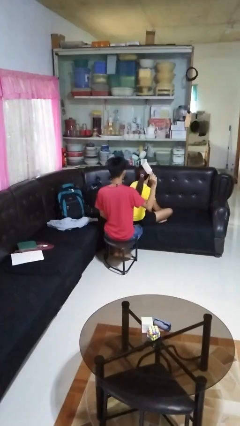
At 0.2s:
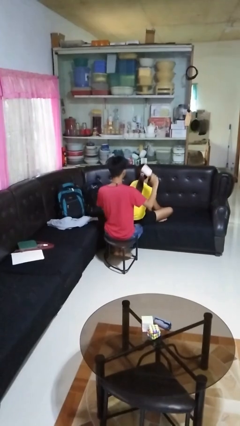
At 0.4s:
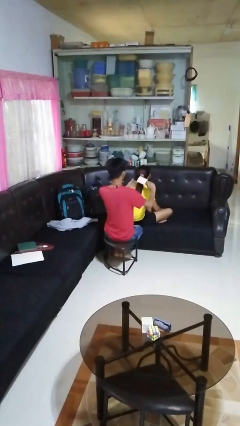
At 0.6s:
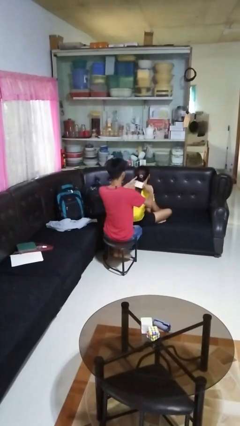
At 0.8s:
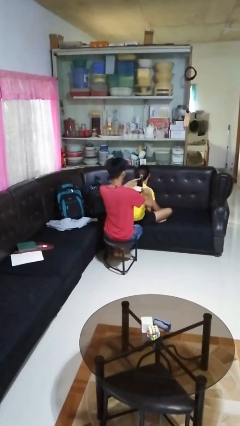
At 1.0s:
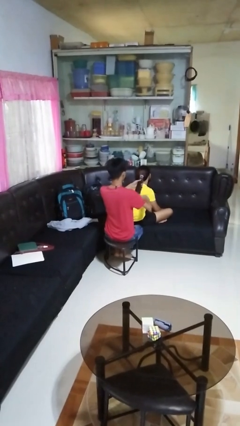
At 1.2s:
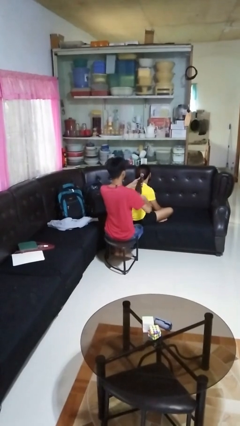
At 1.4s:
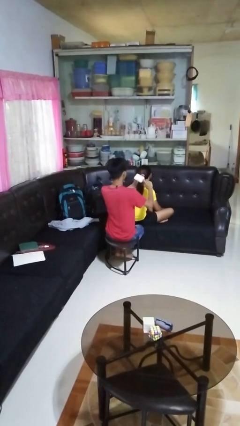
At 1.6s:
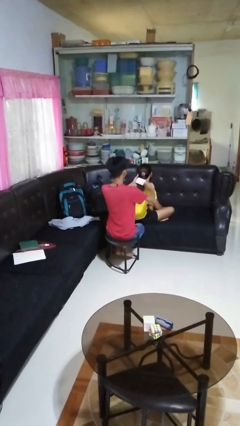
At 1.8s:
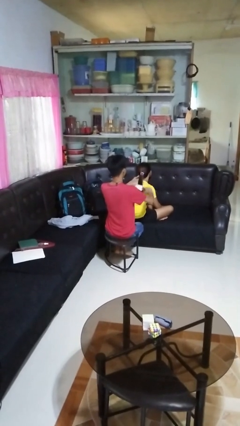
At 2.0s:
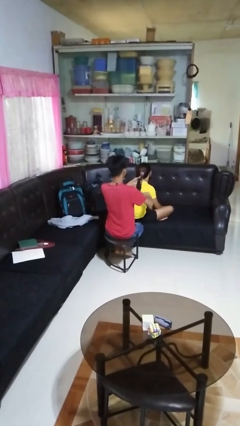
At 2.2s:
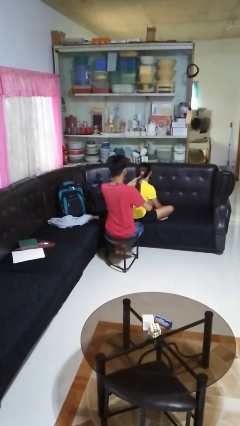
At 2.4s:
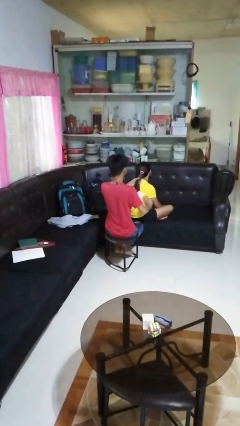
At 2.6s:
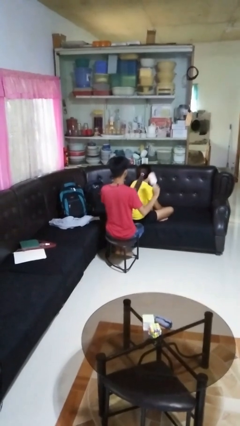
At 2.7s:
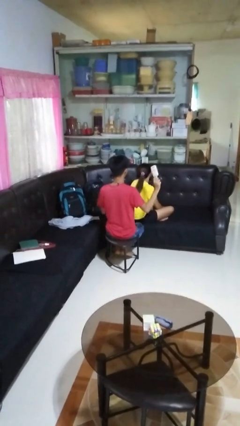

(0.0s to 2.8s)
person brushes hair of person

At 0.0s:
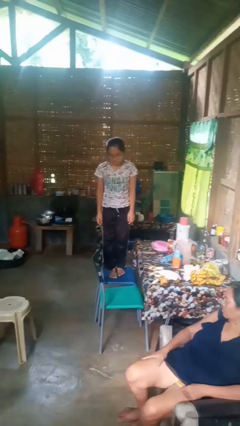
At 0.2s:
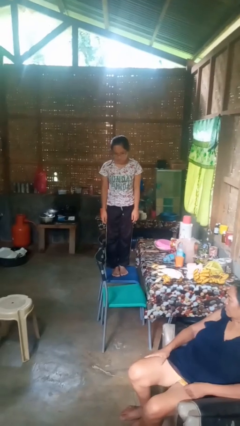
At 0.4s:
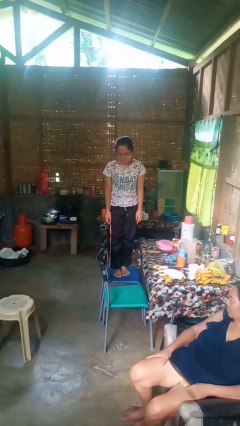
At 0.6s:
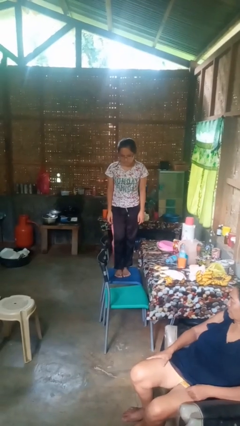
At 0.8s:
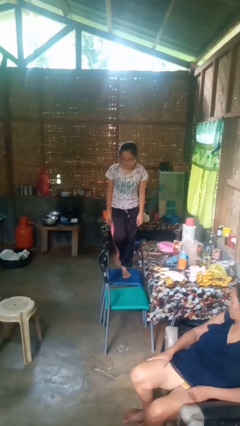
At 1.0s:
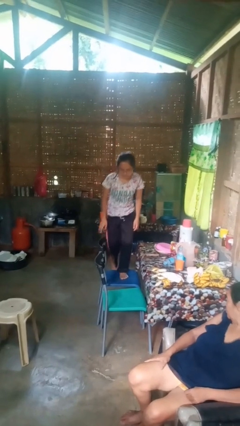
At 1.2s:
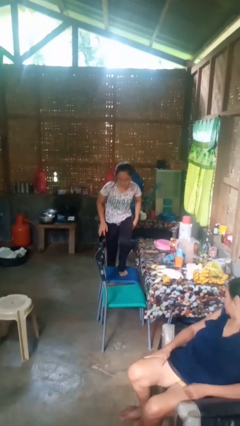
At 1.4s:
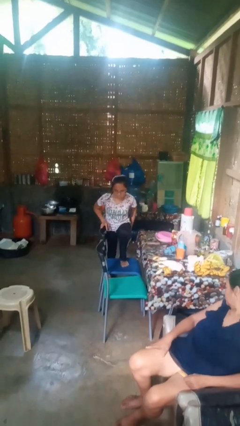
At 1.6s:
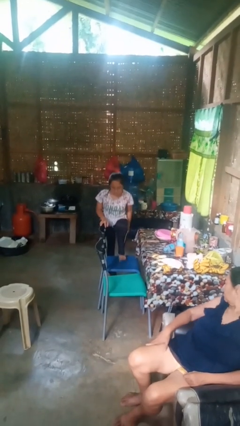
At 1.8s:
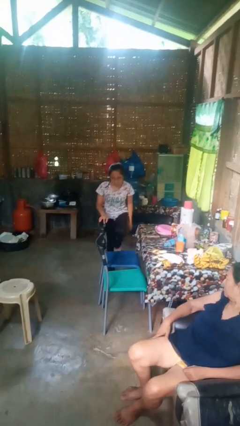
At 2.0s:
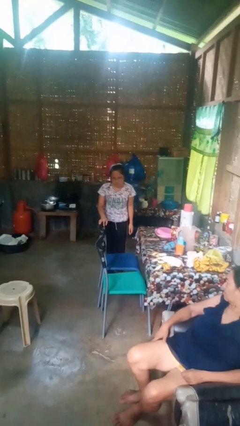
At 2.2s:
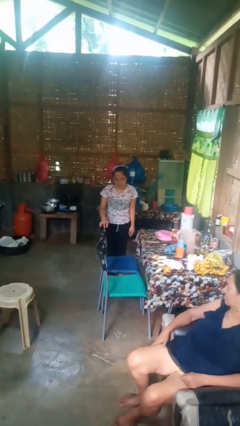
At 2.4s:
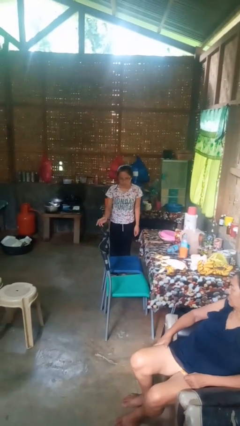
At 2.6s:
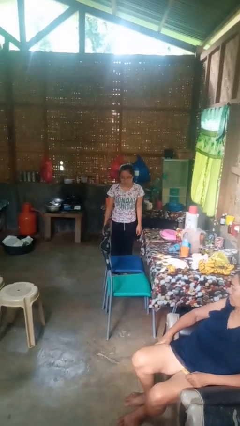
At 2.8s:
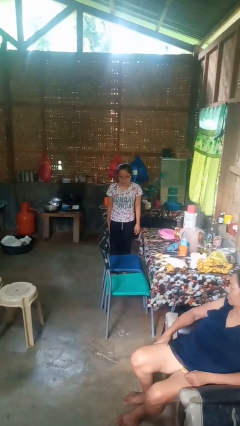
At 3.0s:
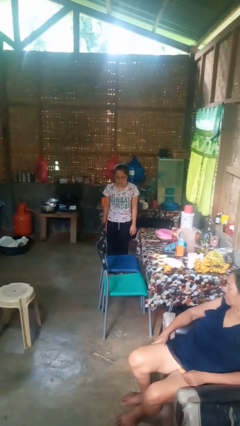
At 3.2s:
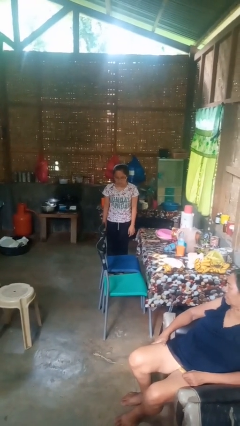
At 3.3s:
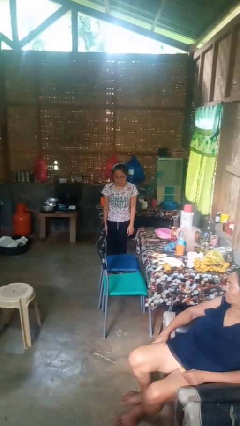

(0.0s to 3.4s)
person climbs off chair

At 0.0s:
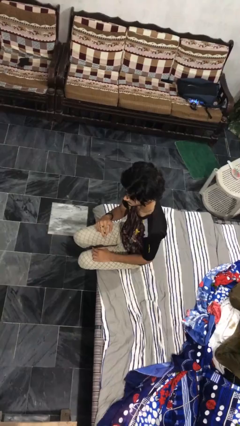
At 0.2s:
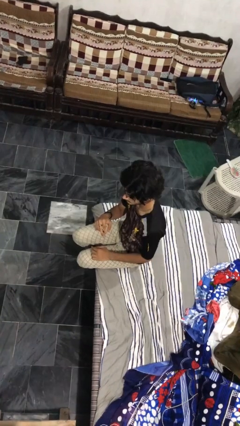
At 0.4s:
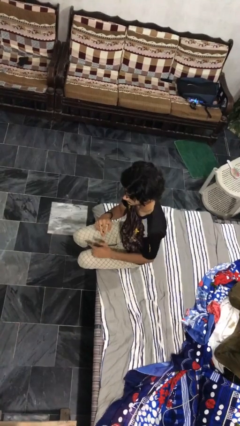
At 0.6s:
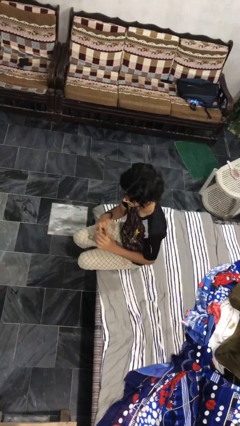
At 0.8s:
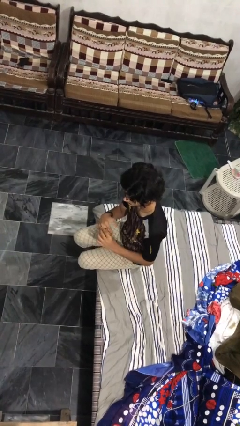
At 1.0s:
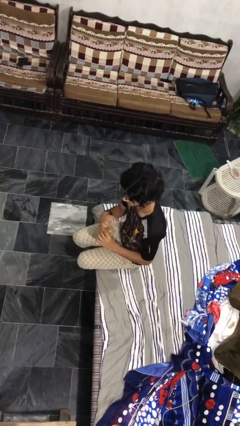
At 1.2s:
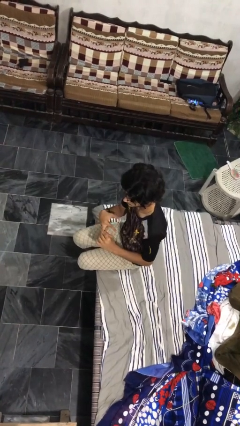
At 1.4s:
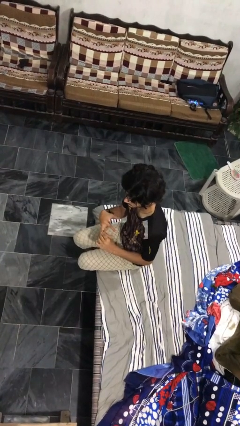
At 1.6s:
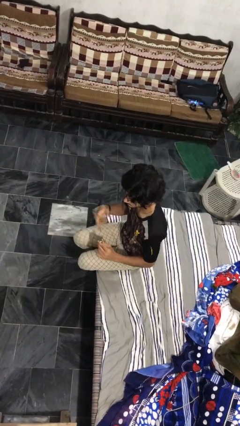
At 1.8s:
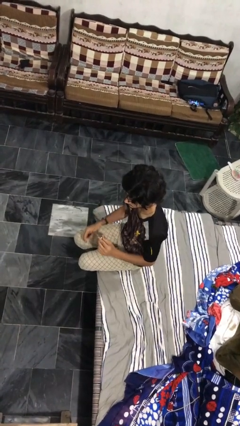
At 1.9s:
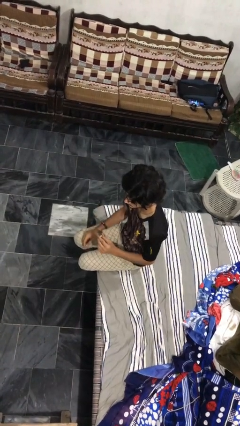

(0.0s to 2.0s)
person takes off ring

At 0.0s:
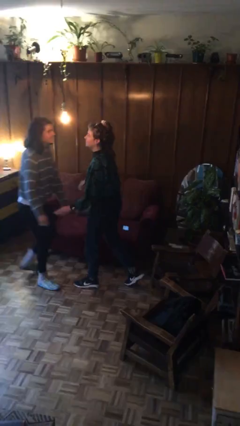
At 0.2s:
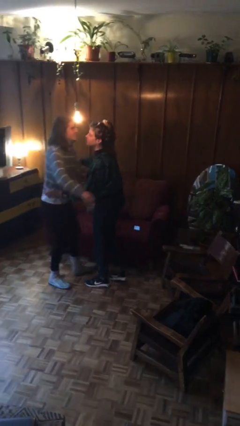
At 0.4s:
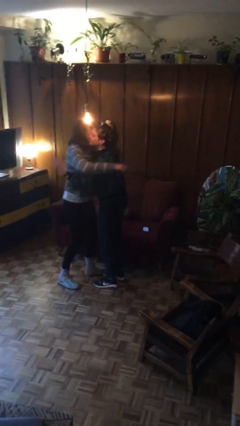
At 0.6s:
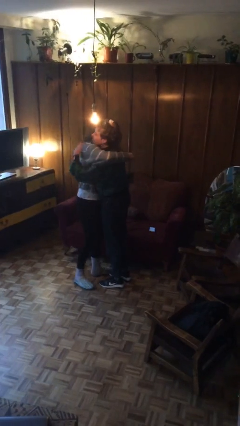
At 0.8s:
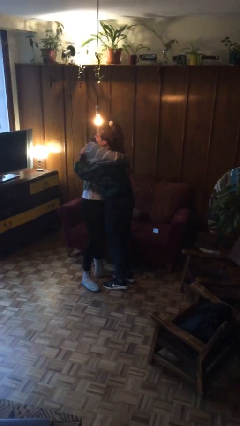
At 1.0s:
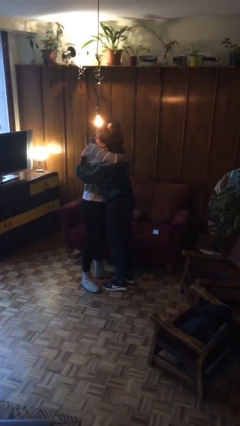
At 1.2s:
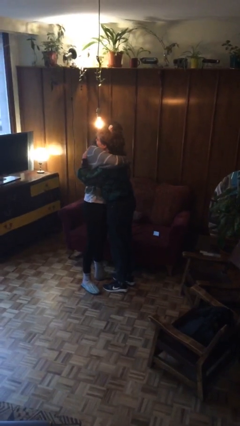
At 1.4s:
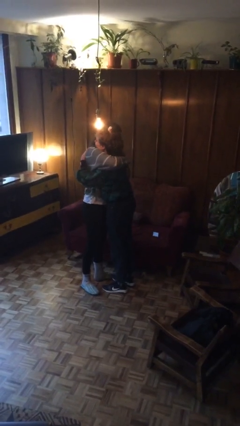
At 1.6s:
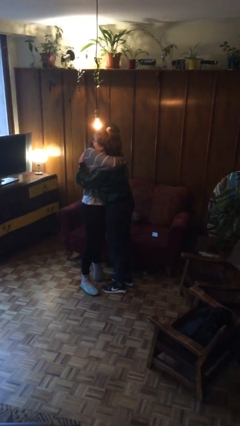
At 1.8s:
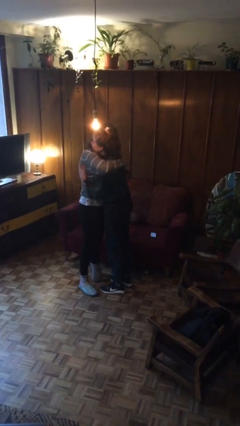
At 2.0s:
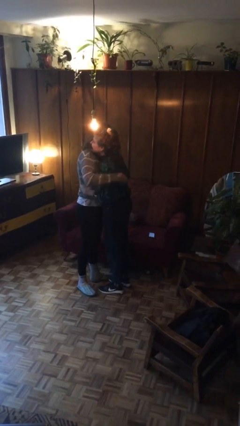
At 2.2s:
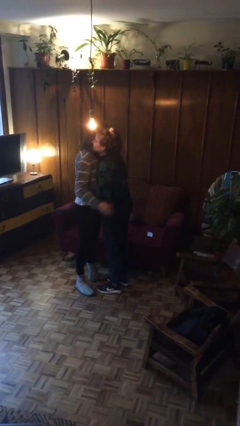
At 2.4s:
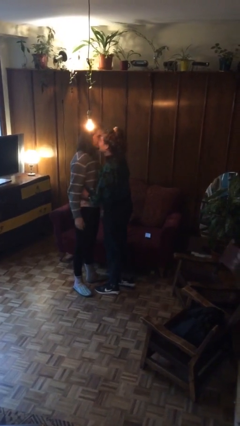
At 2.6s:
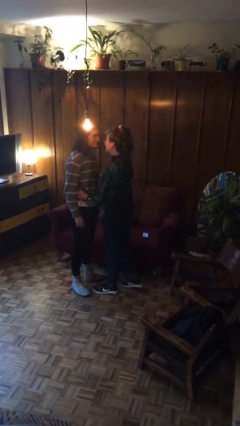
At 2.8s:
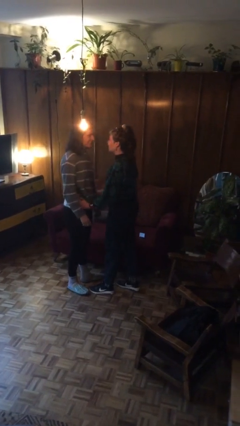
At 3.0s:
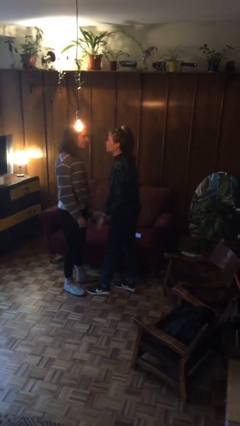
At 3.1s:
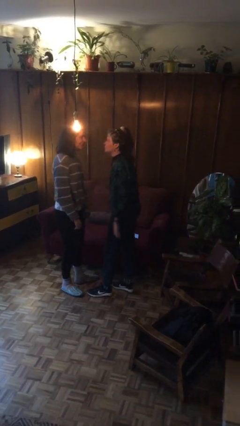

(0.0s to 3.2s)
person embraces person

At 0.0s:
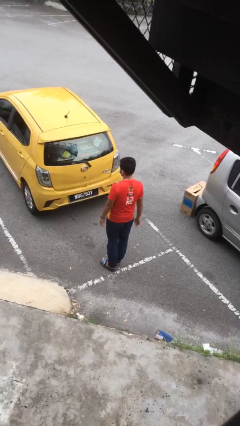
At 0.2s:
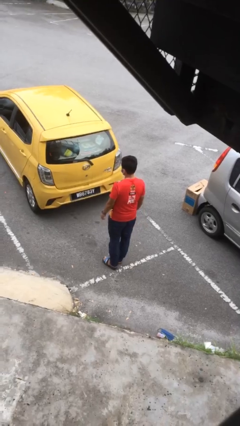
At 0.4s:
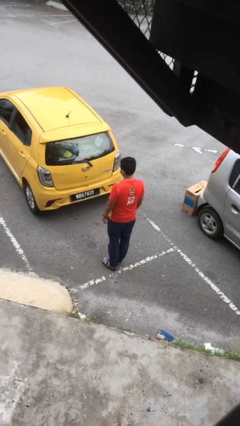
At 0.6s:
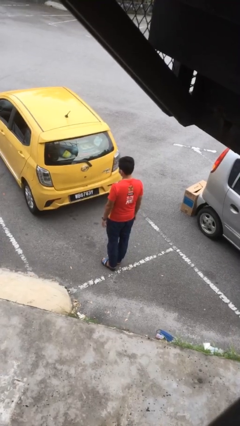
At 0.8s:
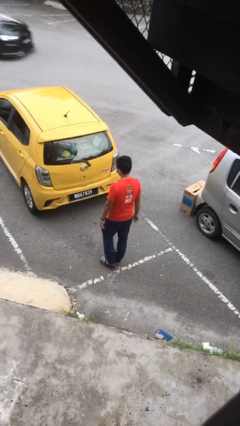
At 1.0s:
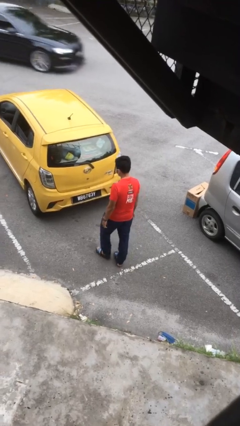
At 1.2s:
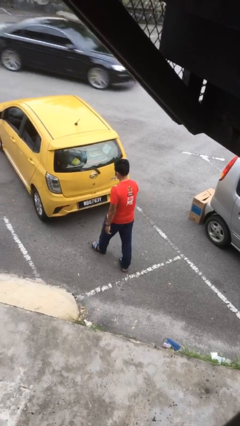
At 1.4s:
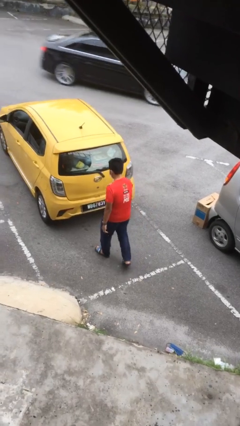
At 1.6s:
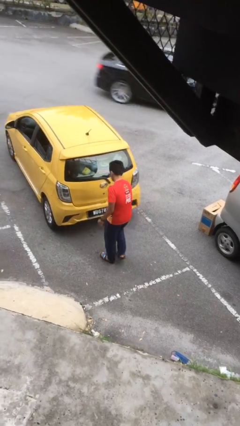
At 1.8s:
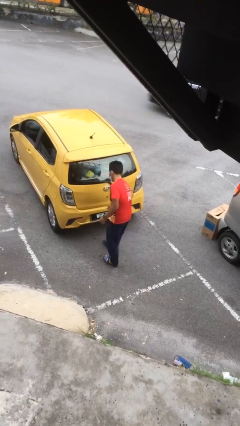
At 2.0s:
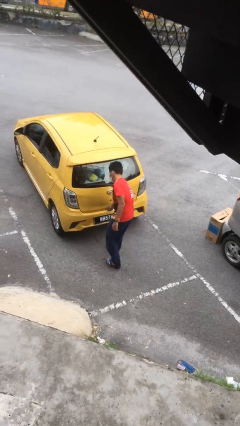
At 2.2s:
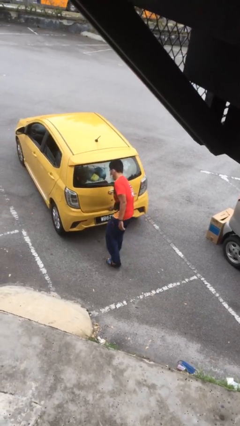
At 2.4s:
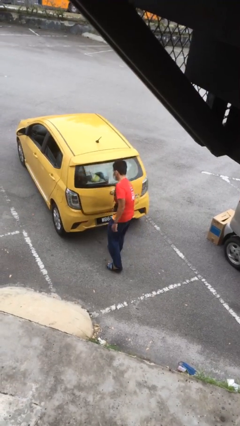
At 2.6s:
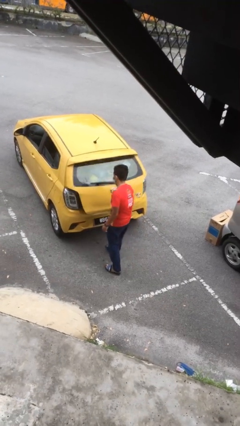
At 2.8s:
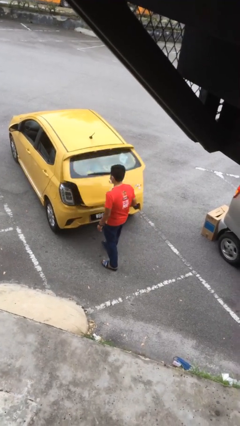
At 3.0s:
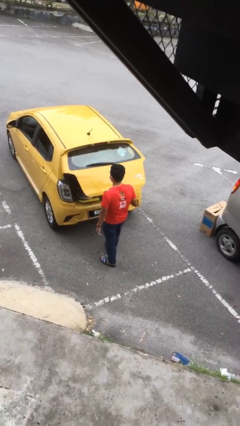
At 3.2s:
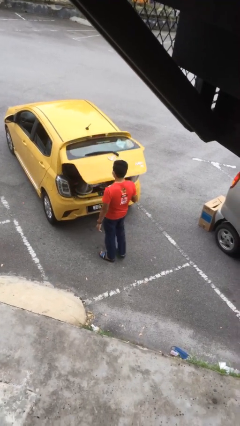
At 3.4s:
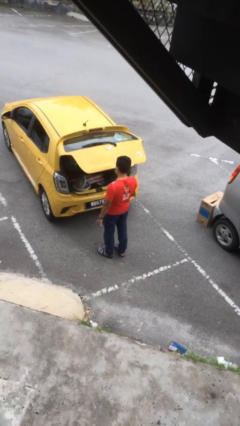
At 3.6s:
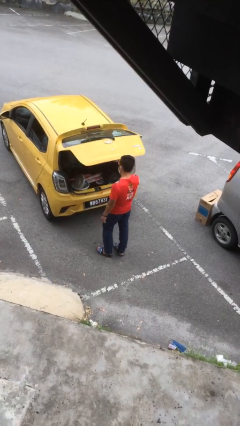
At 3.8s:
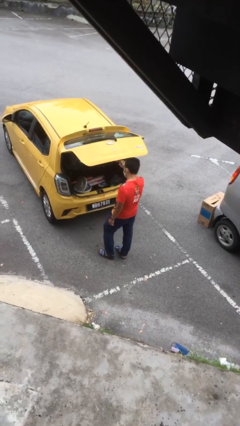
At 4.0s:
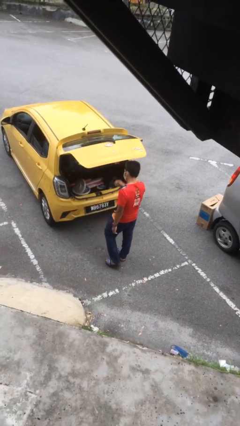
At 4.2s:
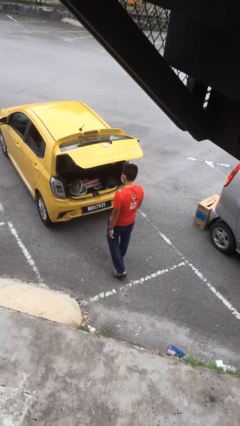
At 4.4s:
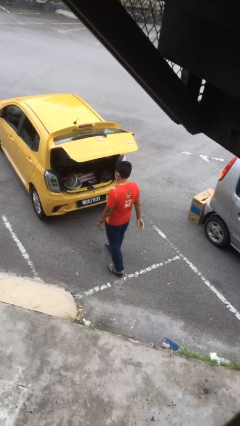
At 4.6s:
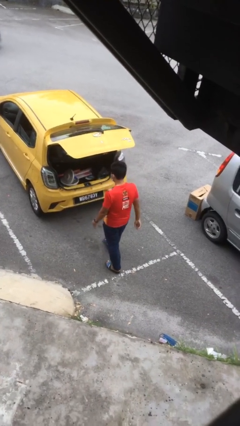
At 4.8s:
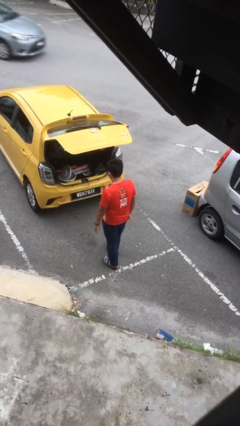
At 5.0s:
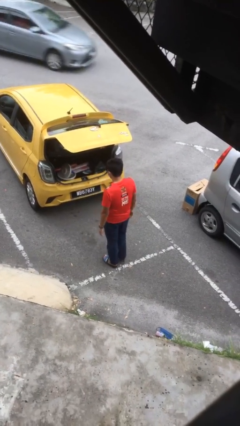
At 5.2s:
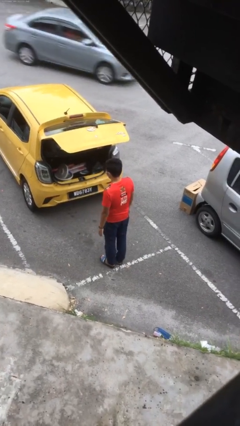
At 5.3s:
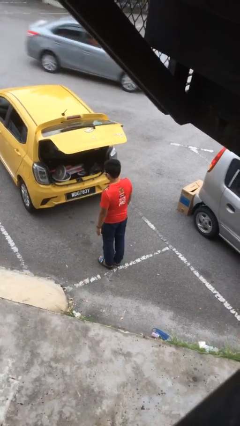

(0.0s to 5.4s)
person opens car trunk

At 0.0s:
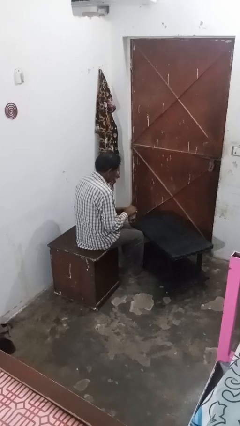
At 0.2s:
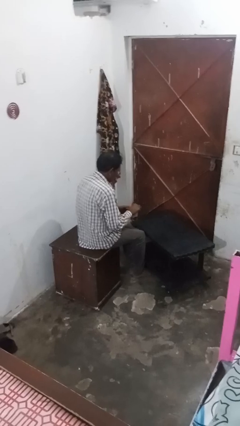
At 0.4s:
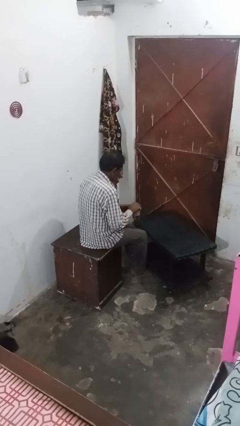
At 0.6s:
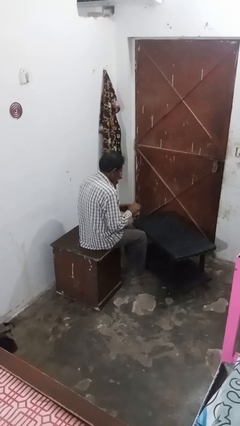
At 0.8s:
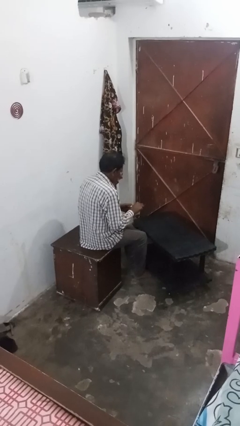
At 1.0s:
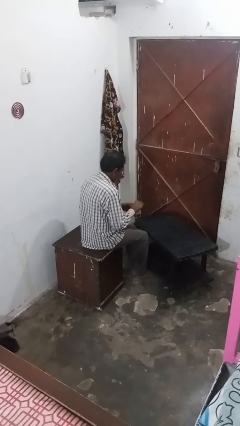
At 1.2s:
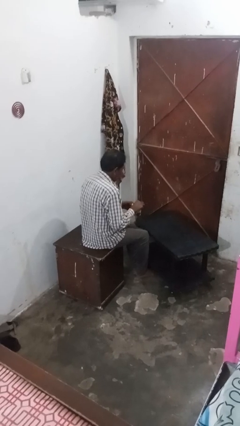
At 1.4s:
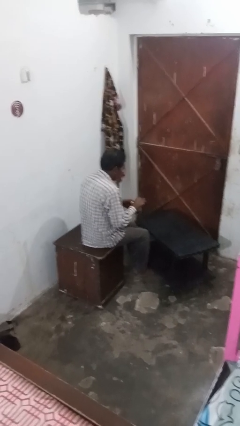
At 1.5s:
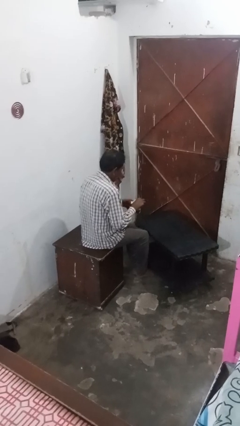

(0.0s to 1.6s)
person stirs mug
